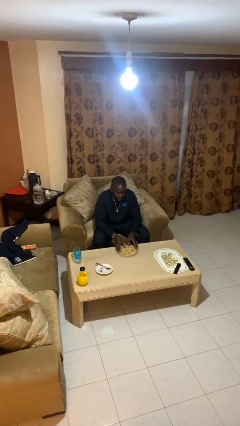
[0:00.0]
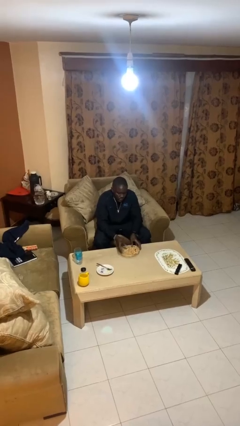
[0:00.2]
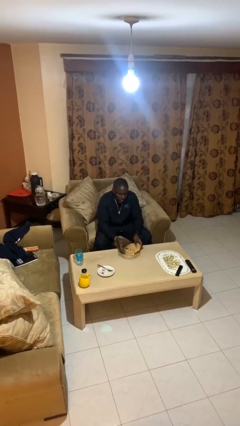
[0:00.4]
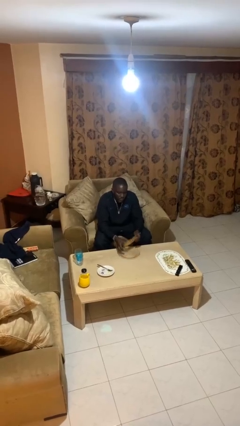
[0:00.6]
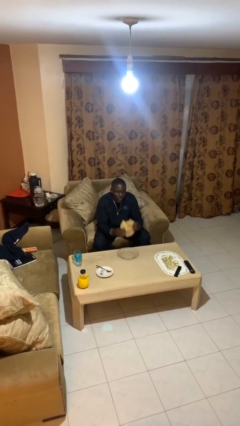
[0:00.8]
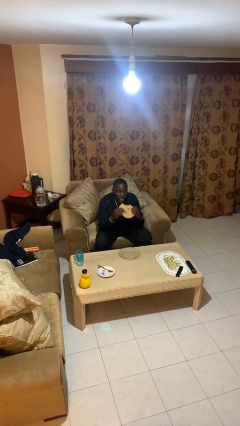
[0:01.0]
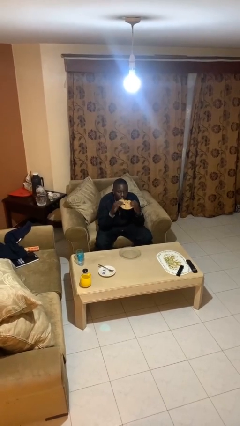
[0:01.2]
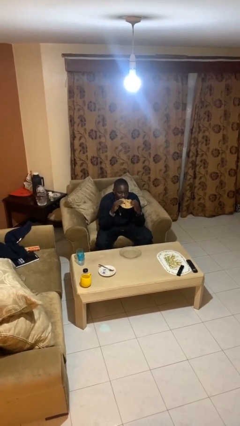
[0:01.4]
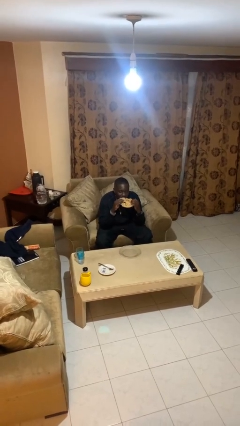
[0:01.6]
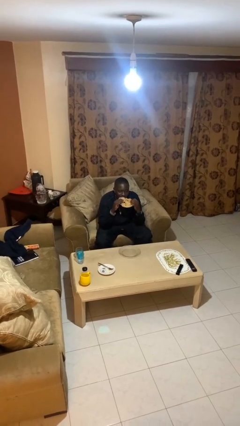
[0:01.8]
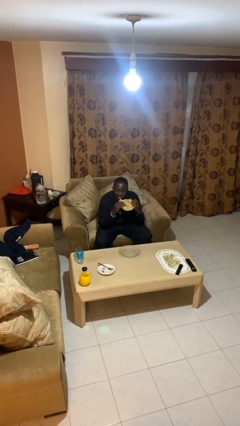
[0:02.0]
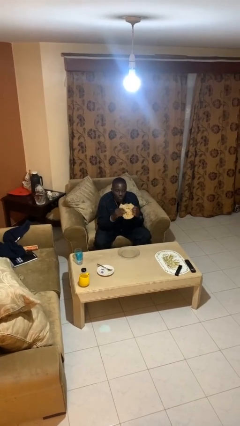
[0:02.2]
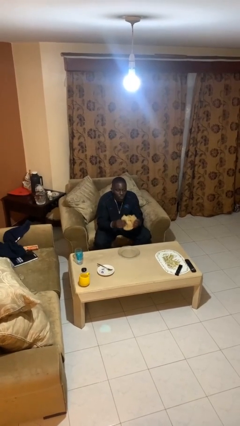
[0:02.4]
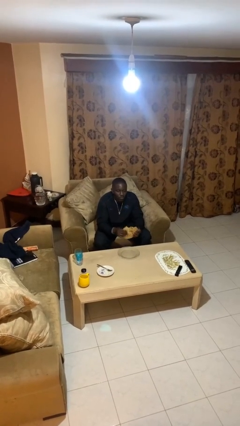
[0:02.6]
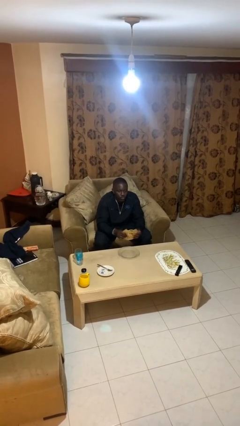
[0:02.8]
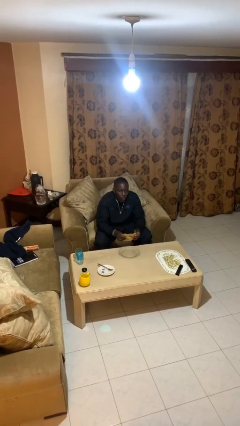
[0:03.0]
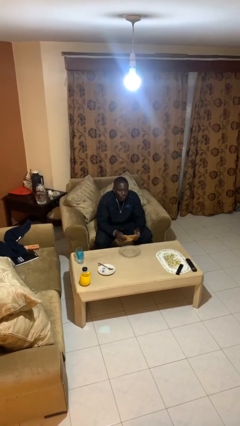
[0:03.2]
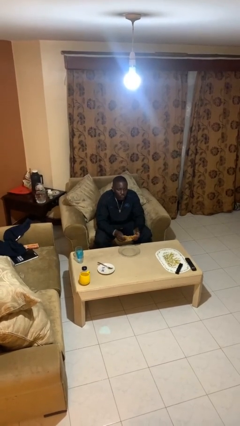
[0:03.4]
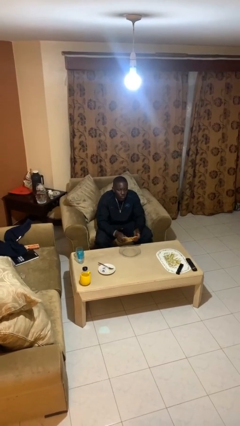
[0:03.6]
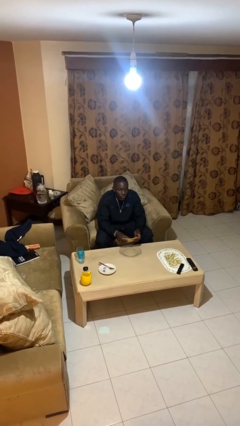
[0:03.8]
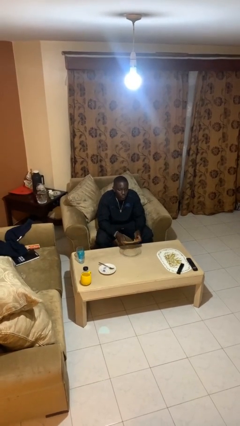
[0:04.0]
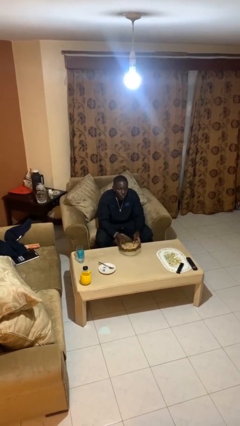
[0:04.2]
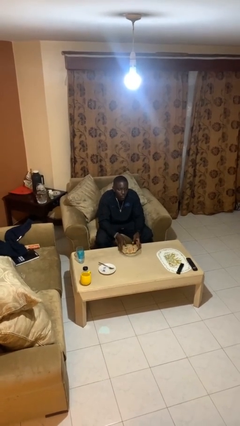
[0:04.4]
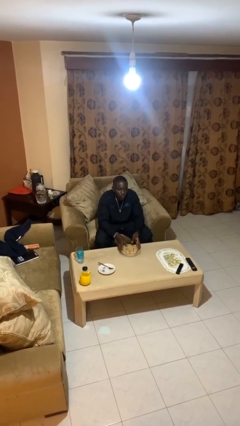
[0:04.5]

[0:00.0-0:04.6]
person eats with hands

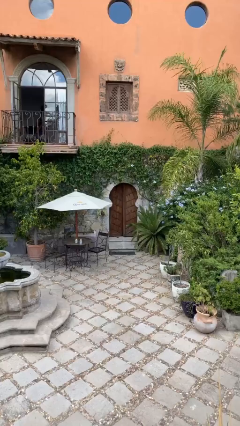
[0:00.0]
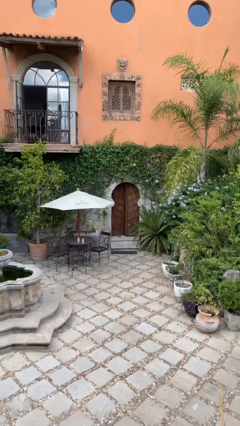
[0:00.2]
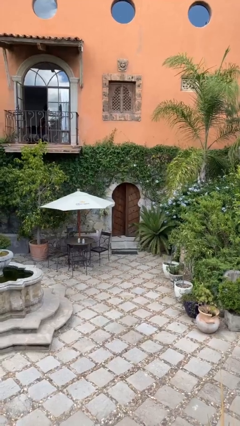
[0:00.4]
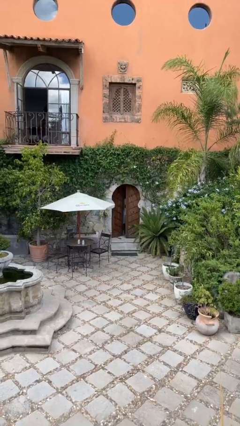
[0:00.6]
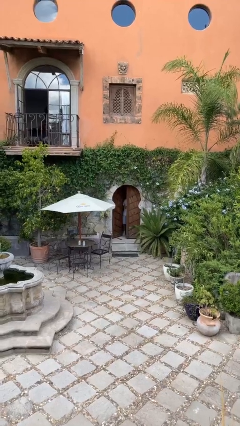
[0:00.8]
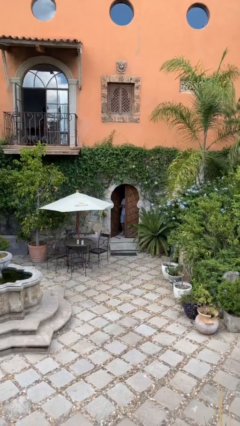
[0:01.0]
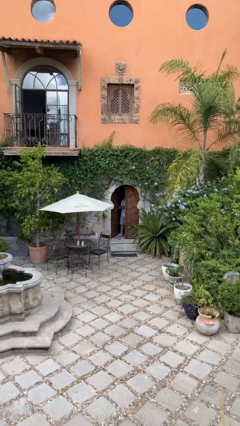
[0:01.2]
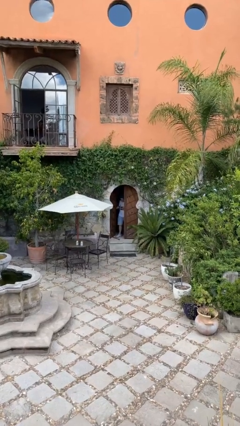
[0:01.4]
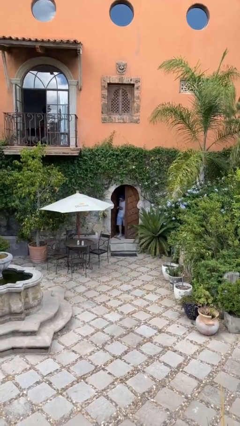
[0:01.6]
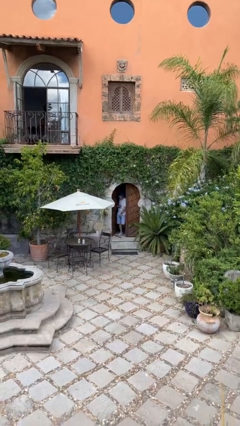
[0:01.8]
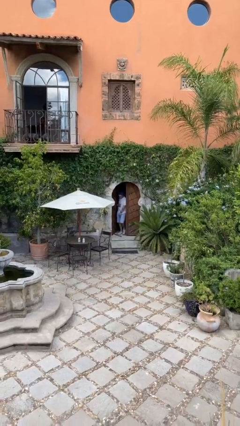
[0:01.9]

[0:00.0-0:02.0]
person opens facility door

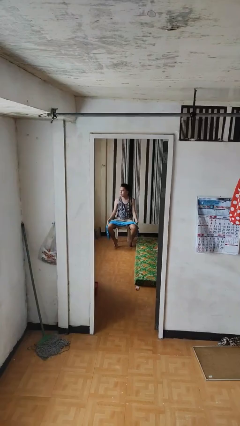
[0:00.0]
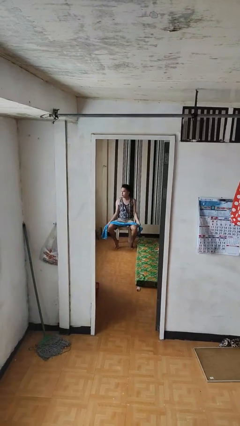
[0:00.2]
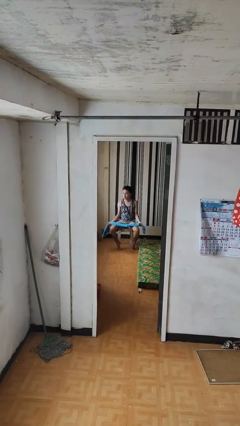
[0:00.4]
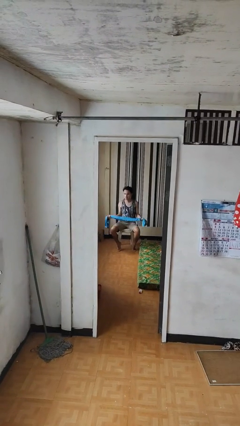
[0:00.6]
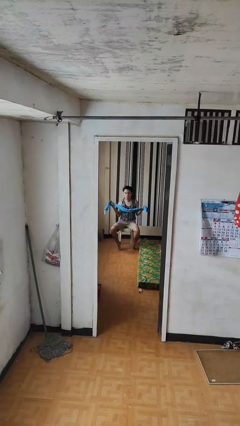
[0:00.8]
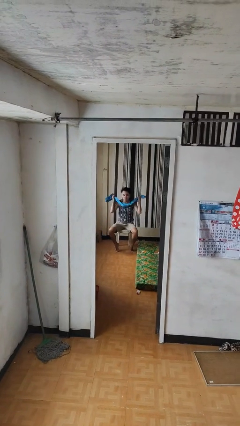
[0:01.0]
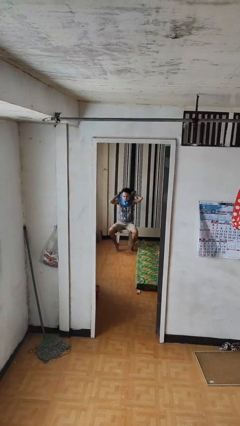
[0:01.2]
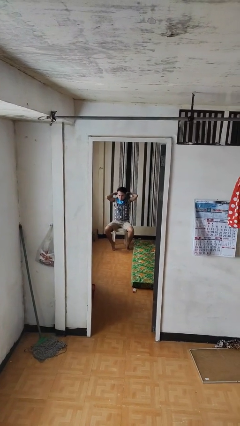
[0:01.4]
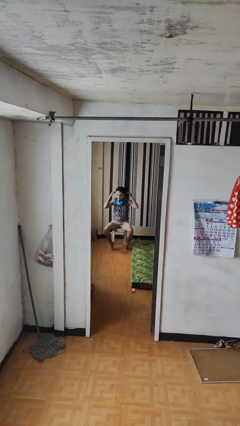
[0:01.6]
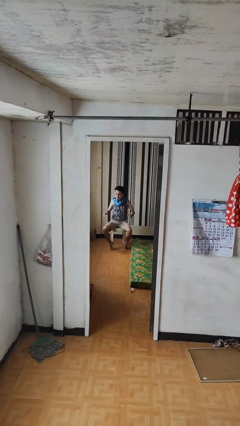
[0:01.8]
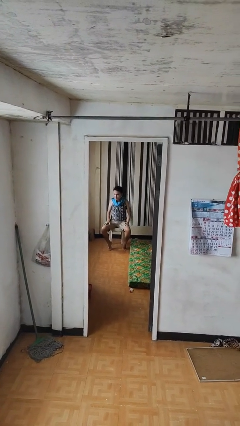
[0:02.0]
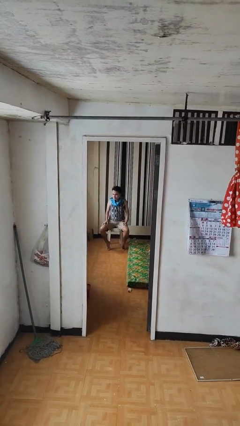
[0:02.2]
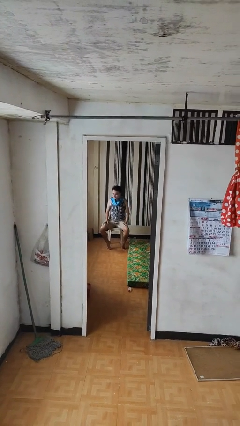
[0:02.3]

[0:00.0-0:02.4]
person puts on scarf

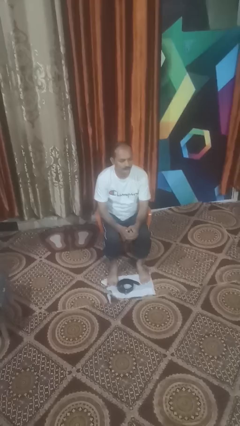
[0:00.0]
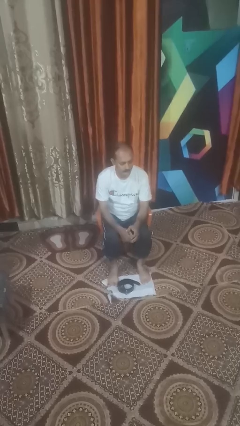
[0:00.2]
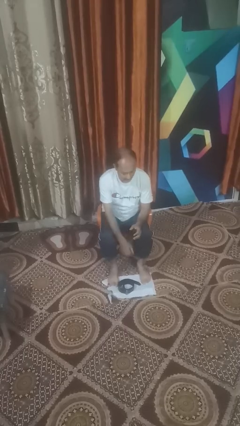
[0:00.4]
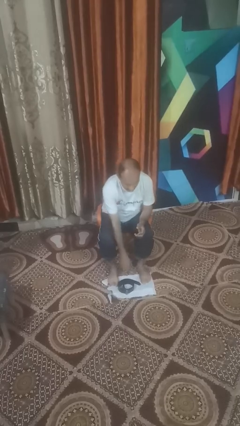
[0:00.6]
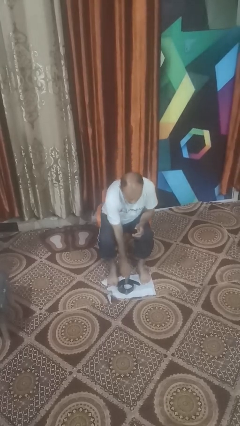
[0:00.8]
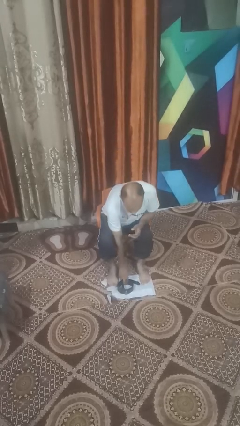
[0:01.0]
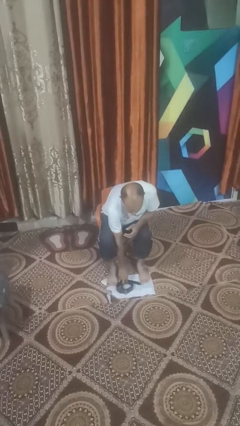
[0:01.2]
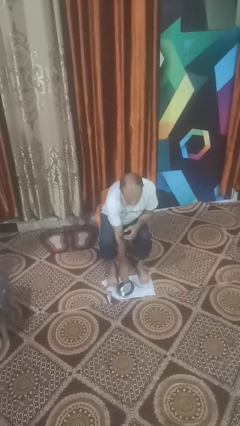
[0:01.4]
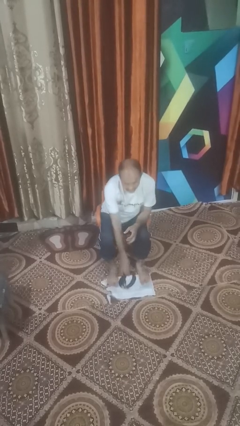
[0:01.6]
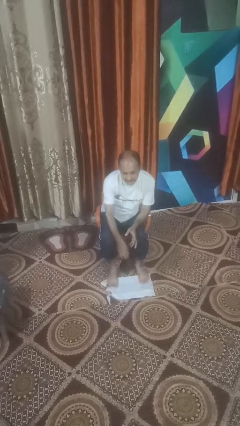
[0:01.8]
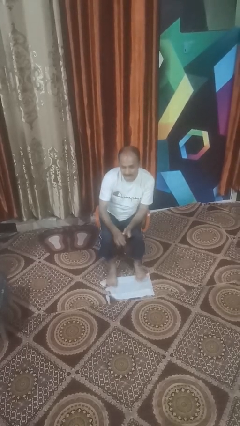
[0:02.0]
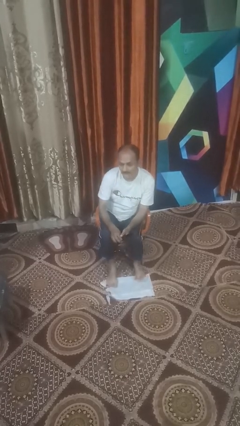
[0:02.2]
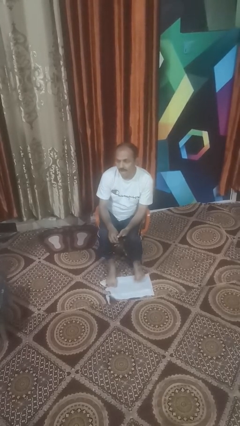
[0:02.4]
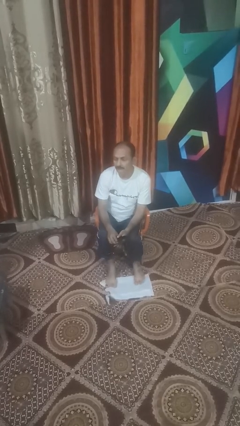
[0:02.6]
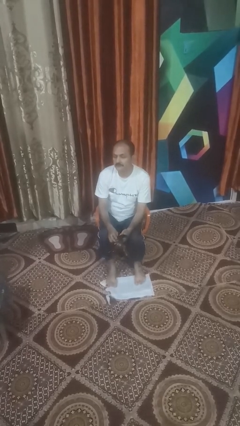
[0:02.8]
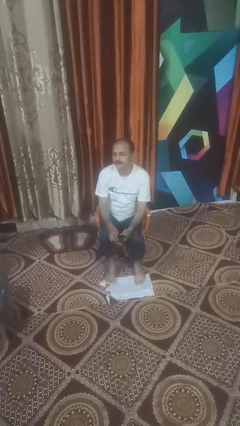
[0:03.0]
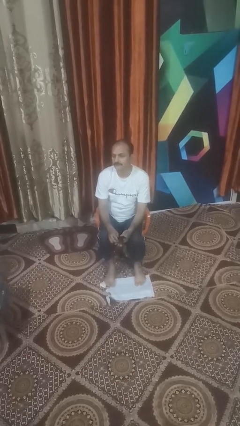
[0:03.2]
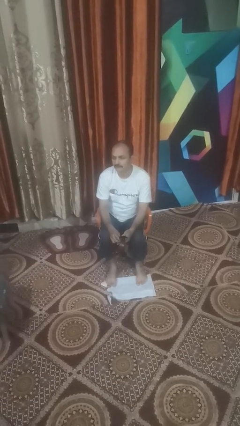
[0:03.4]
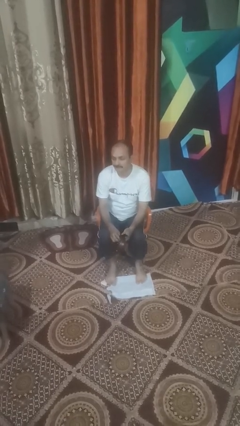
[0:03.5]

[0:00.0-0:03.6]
person puts on belt

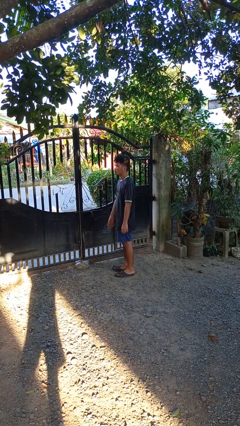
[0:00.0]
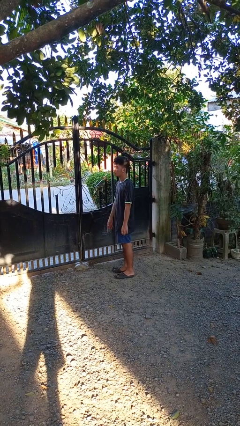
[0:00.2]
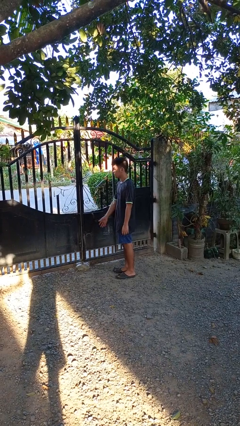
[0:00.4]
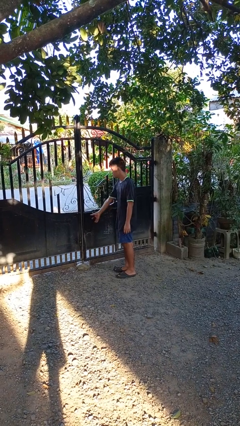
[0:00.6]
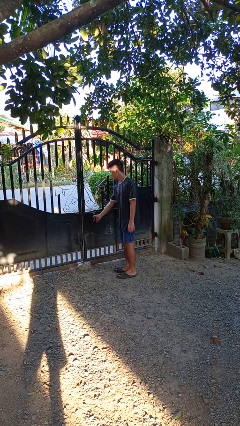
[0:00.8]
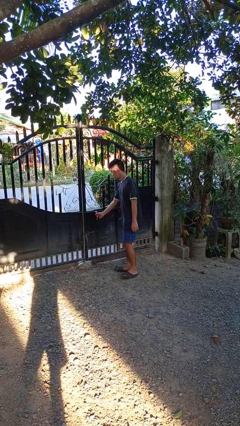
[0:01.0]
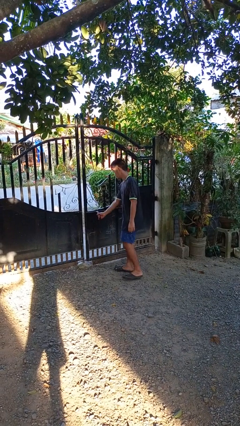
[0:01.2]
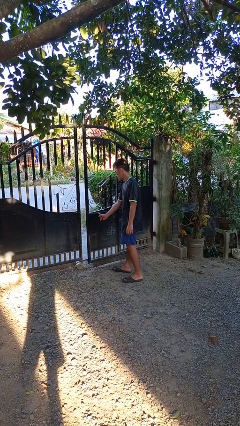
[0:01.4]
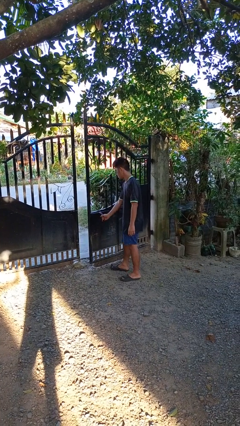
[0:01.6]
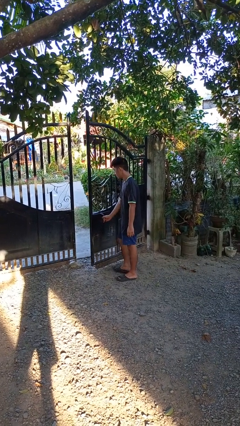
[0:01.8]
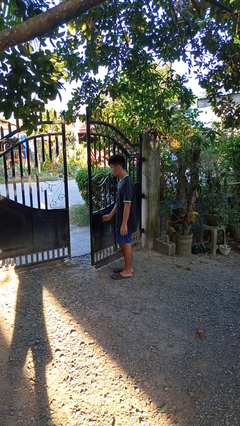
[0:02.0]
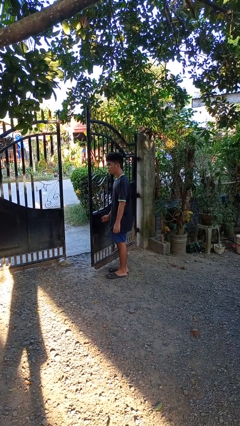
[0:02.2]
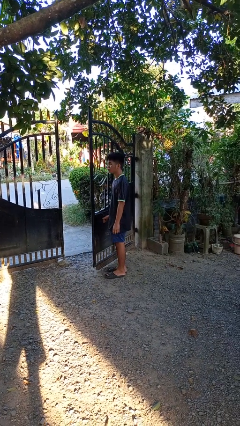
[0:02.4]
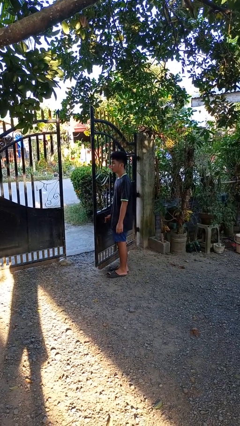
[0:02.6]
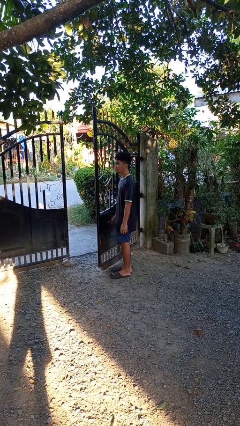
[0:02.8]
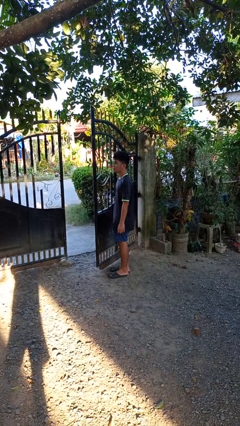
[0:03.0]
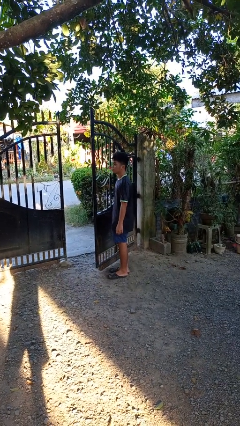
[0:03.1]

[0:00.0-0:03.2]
person opens gate

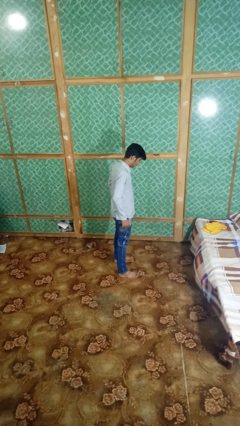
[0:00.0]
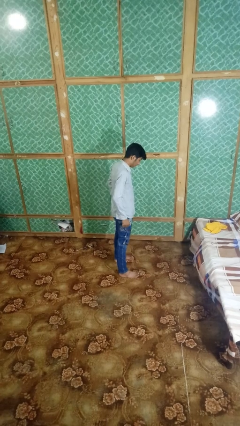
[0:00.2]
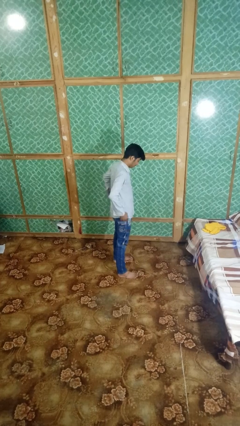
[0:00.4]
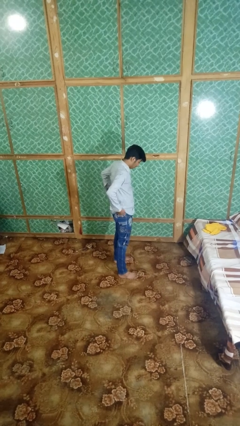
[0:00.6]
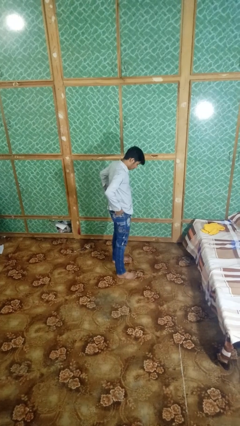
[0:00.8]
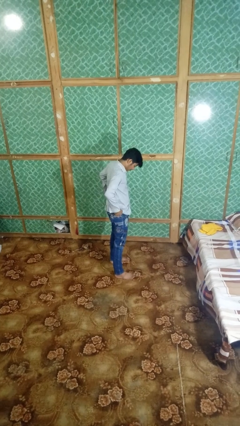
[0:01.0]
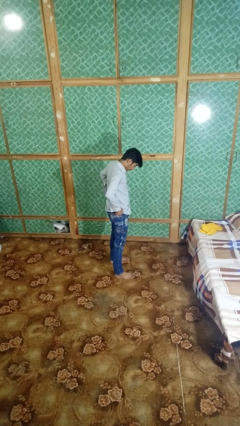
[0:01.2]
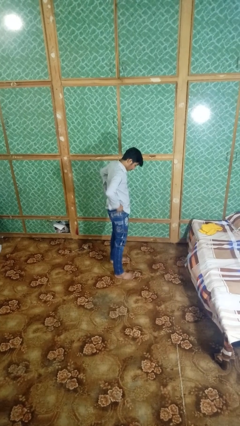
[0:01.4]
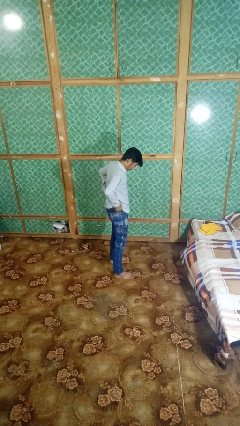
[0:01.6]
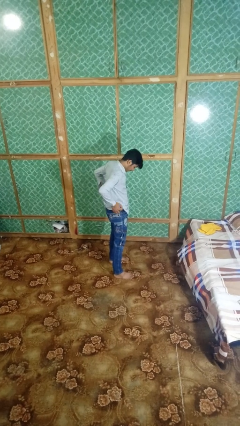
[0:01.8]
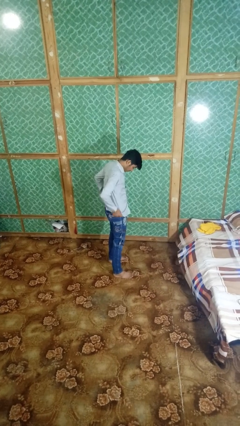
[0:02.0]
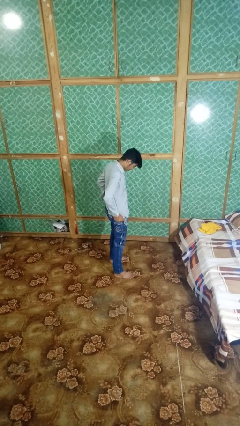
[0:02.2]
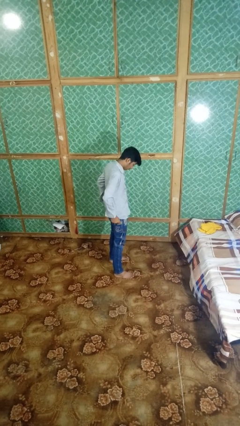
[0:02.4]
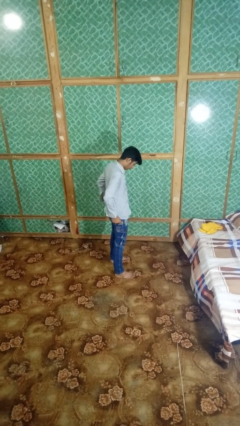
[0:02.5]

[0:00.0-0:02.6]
person hikes up pants
